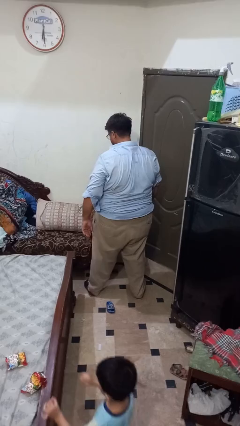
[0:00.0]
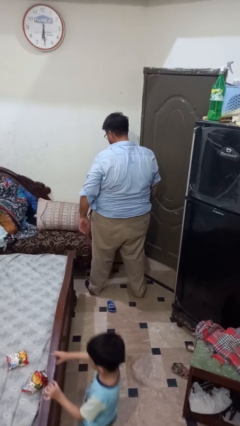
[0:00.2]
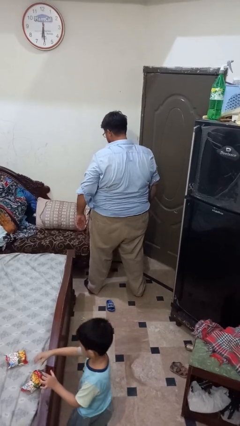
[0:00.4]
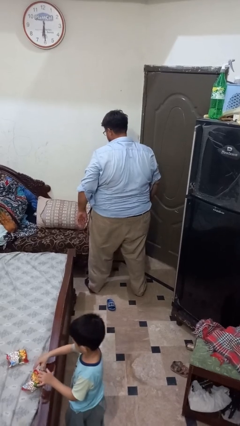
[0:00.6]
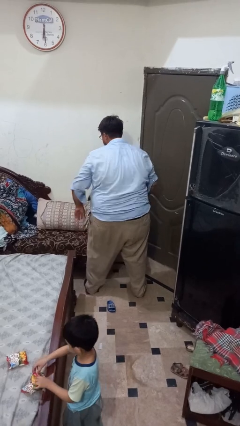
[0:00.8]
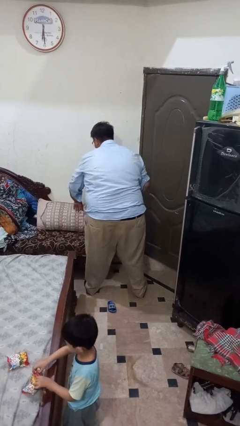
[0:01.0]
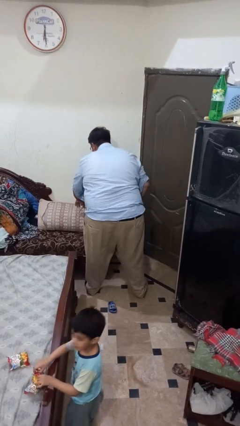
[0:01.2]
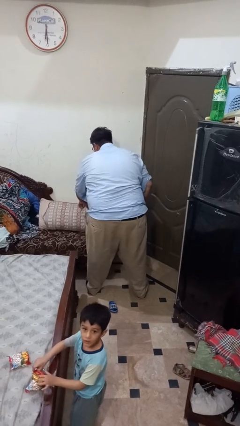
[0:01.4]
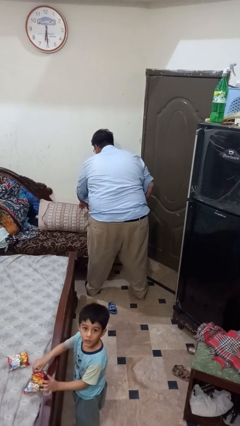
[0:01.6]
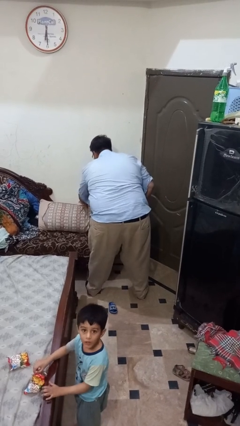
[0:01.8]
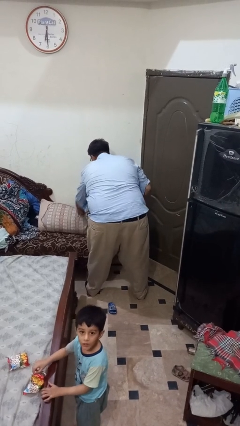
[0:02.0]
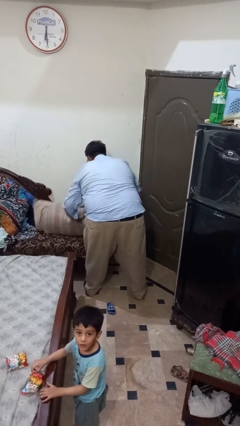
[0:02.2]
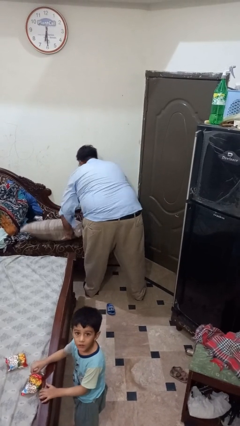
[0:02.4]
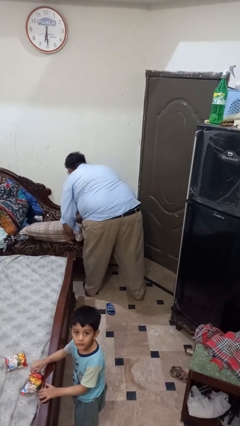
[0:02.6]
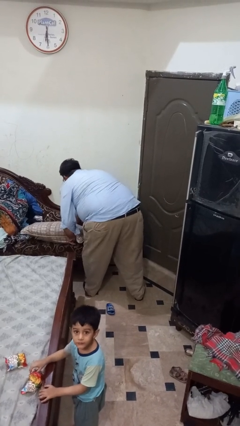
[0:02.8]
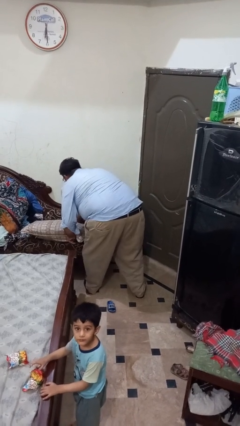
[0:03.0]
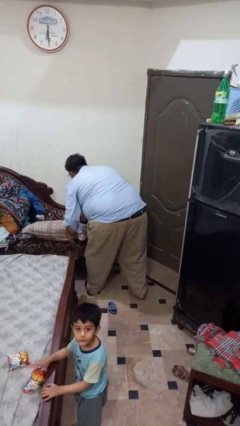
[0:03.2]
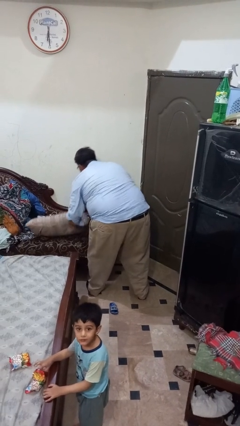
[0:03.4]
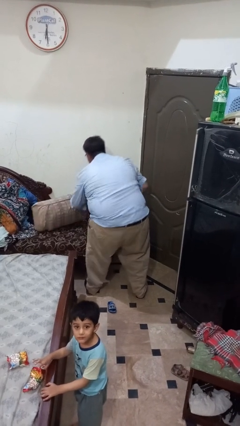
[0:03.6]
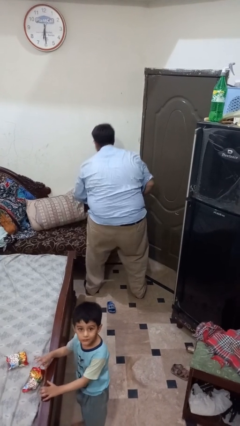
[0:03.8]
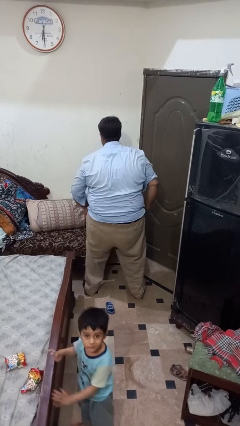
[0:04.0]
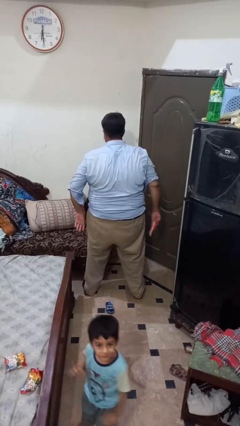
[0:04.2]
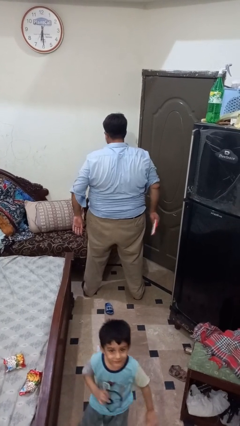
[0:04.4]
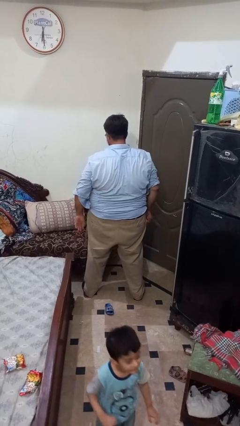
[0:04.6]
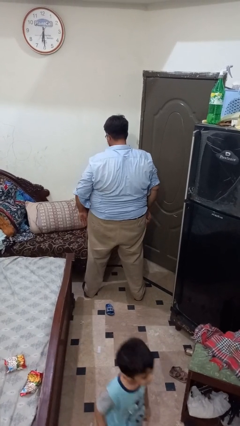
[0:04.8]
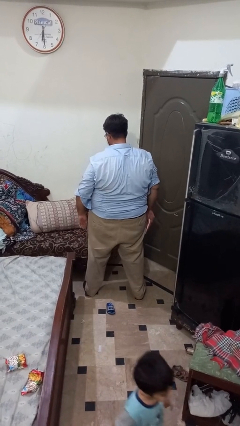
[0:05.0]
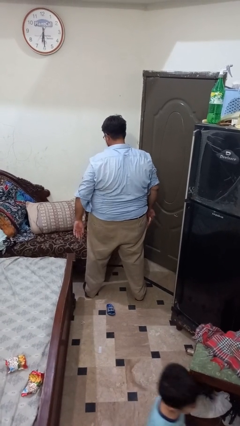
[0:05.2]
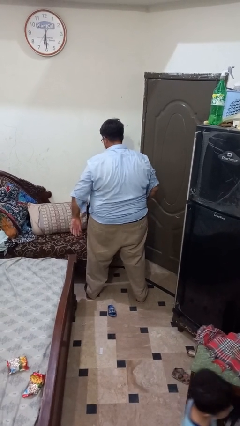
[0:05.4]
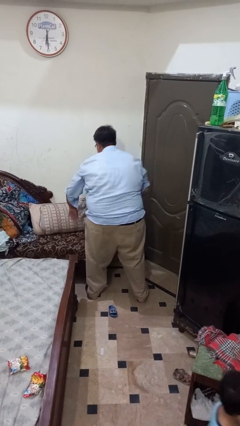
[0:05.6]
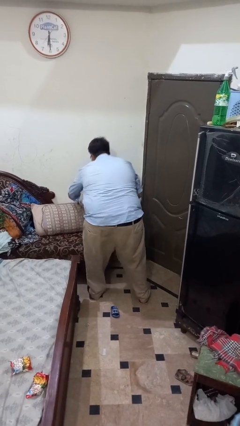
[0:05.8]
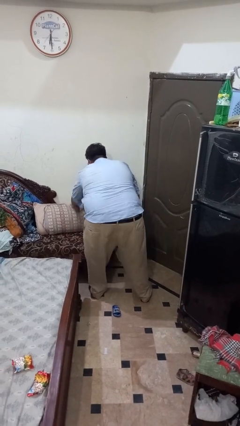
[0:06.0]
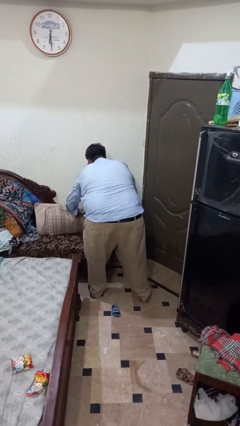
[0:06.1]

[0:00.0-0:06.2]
person searches in couch

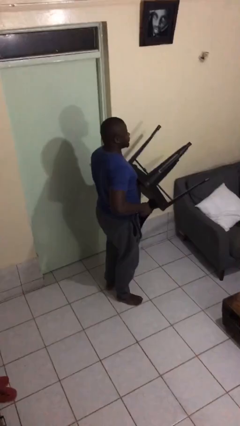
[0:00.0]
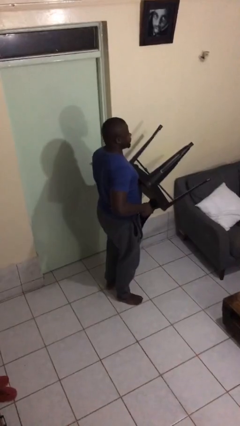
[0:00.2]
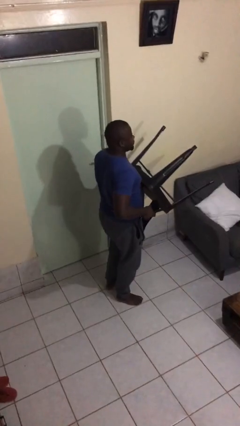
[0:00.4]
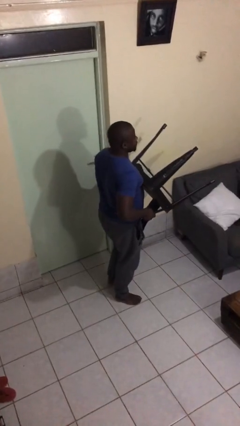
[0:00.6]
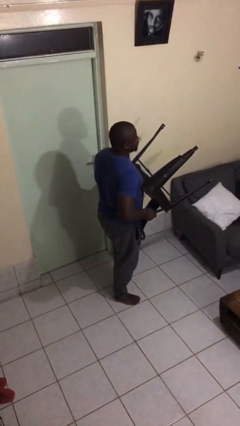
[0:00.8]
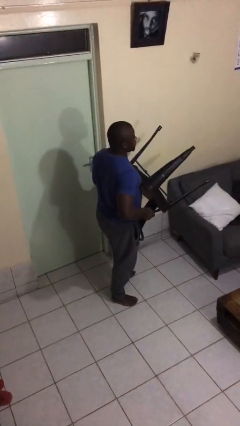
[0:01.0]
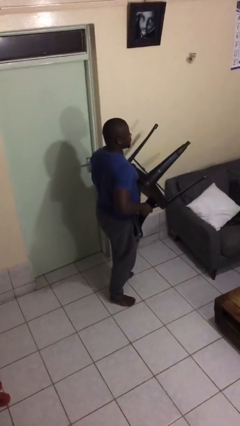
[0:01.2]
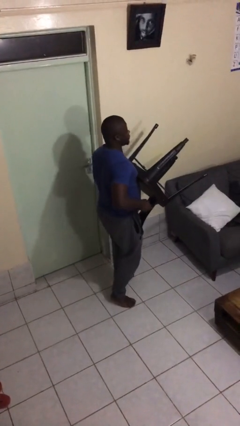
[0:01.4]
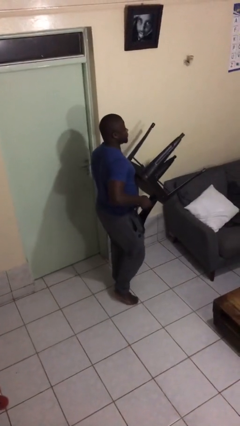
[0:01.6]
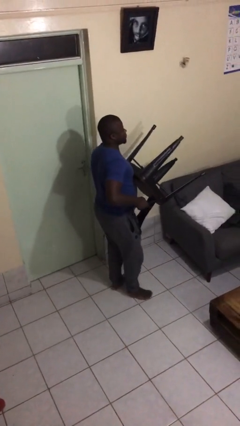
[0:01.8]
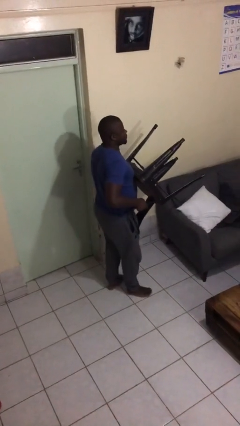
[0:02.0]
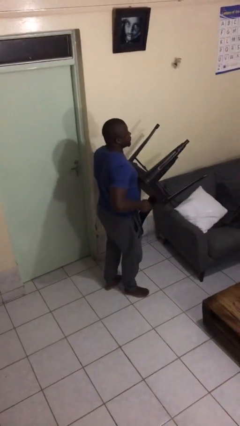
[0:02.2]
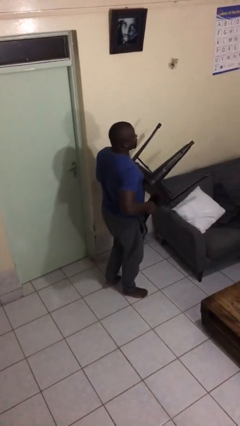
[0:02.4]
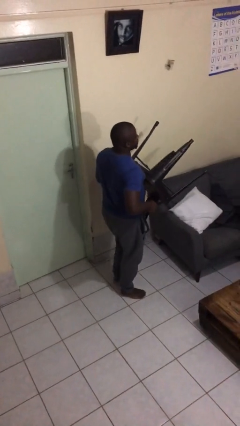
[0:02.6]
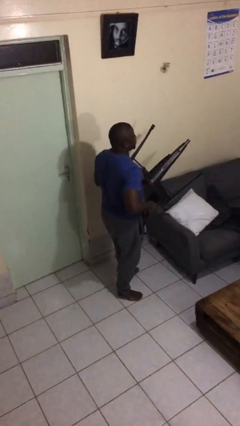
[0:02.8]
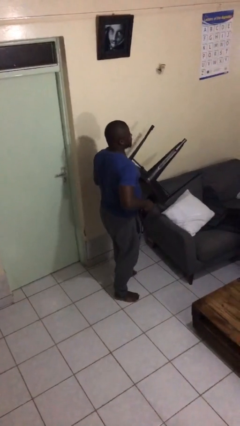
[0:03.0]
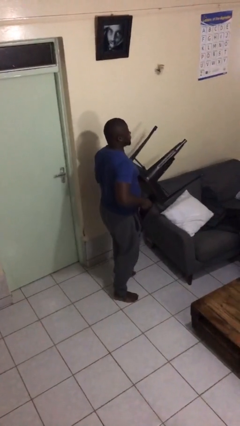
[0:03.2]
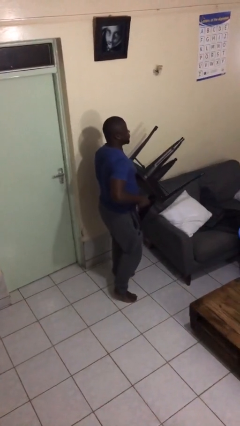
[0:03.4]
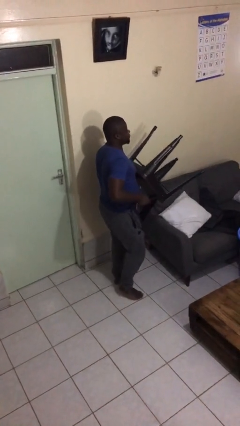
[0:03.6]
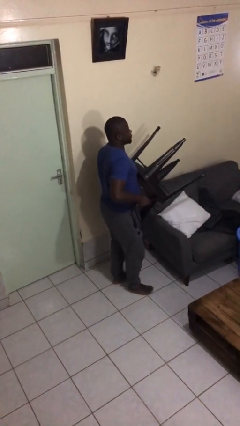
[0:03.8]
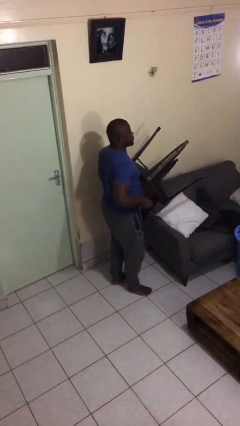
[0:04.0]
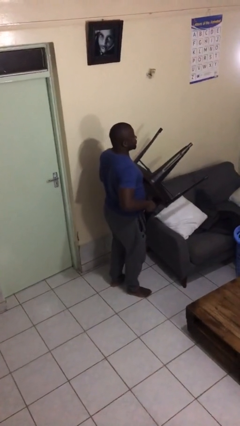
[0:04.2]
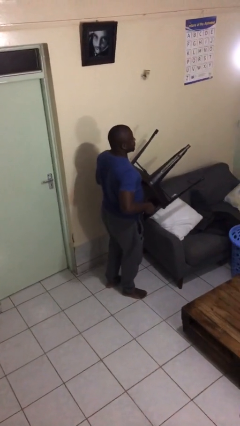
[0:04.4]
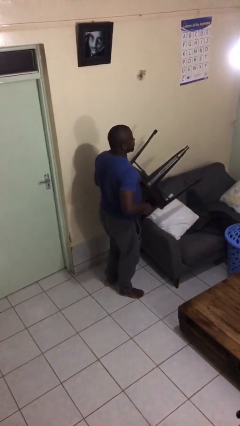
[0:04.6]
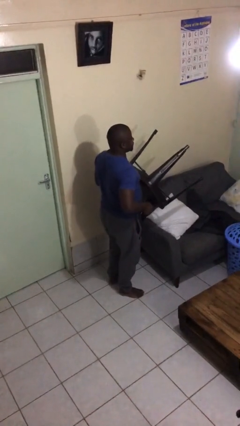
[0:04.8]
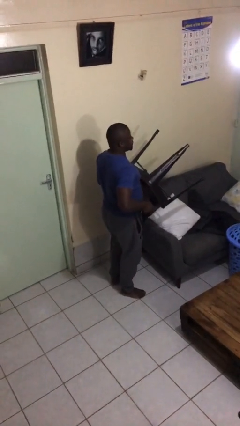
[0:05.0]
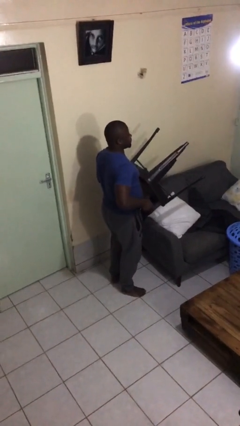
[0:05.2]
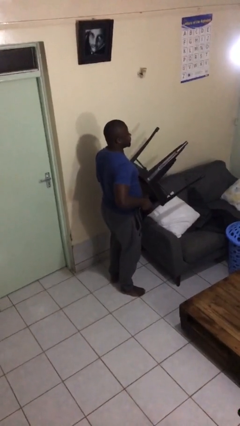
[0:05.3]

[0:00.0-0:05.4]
person carries furniture

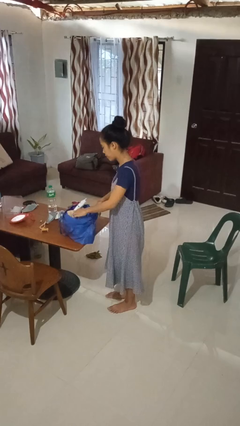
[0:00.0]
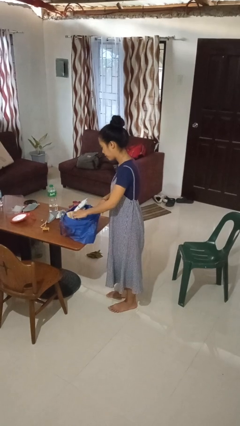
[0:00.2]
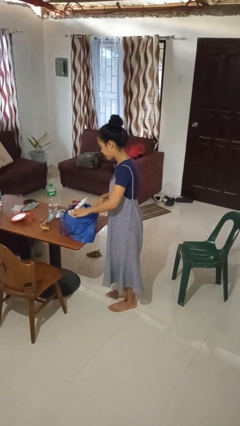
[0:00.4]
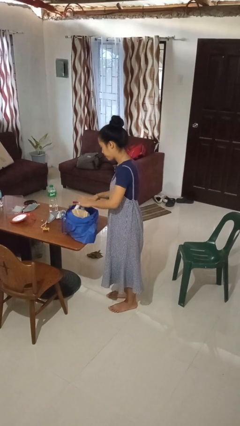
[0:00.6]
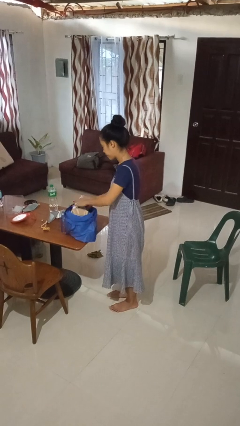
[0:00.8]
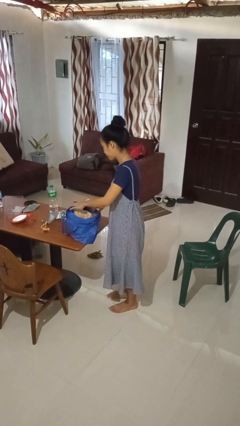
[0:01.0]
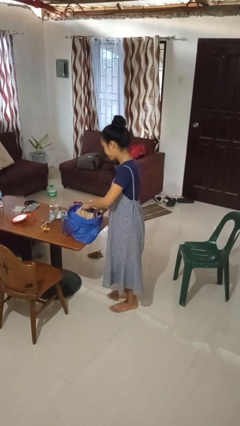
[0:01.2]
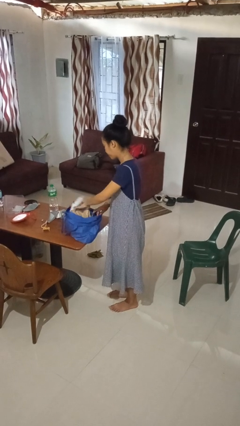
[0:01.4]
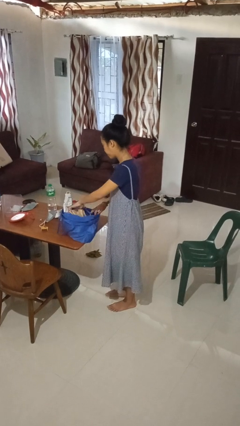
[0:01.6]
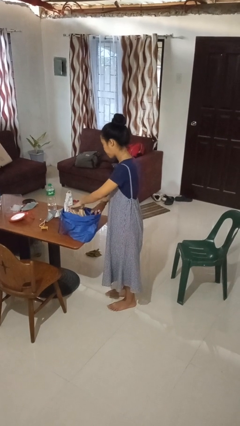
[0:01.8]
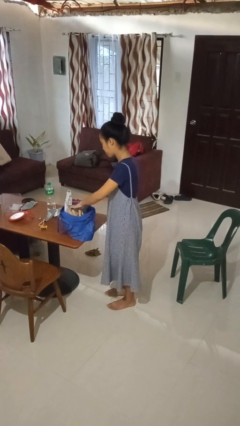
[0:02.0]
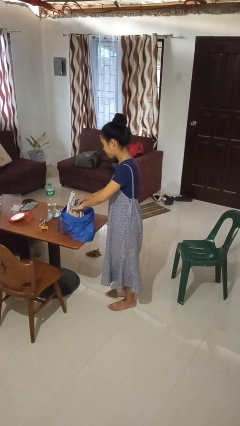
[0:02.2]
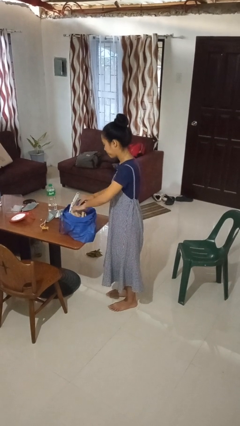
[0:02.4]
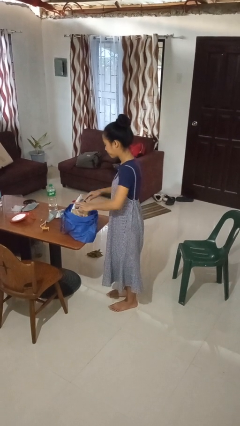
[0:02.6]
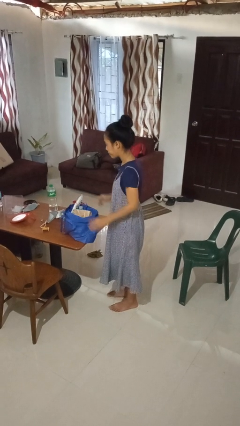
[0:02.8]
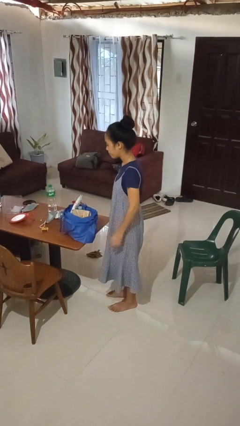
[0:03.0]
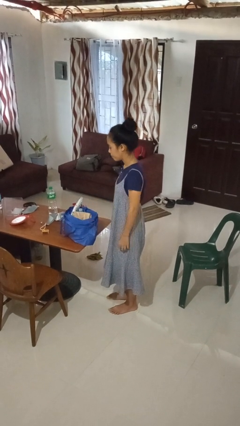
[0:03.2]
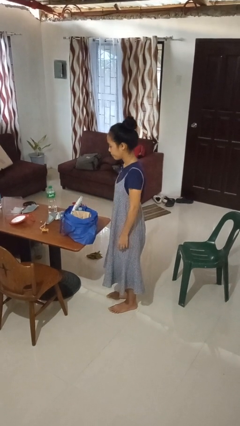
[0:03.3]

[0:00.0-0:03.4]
person searches in bag

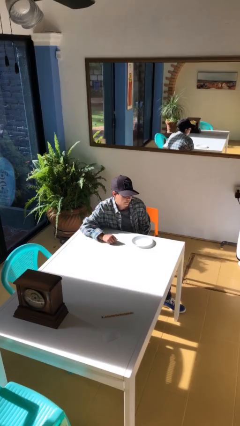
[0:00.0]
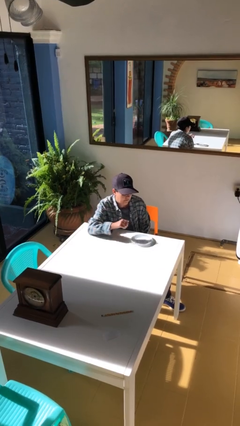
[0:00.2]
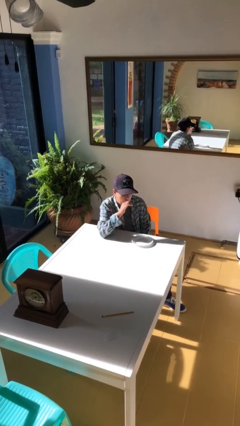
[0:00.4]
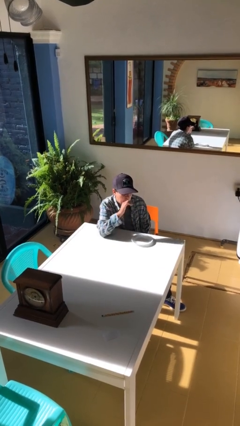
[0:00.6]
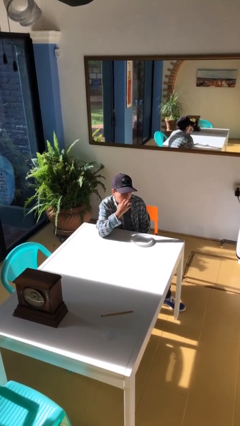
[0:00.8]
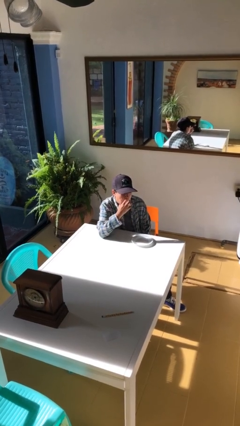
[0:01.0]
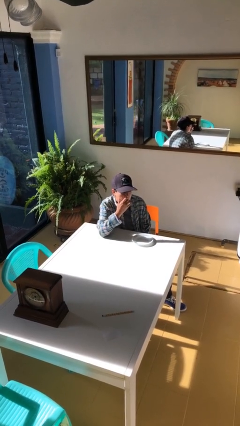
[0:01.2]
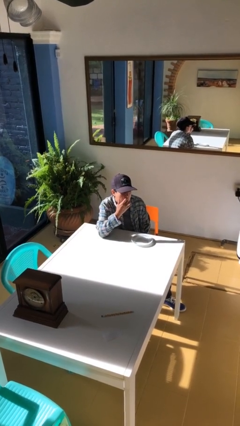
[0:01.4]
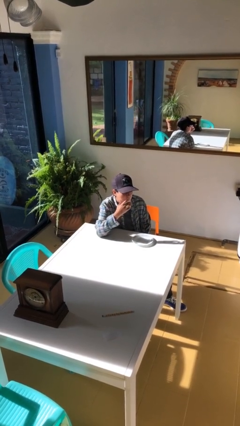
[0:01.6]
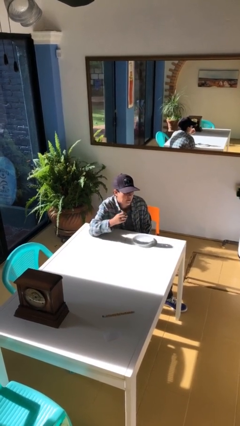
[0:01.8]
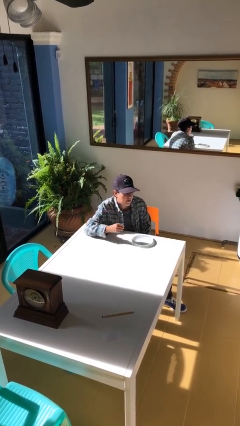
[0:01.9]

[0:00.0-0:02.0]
person licks fingers

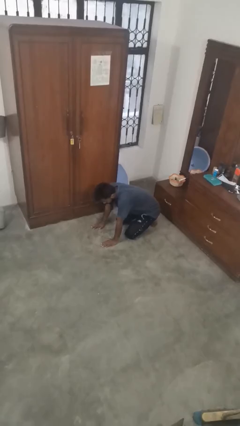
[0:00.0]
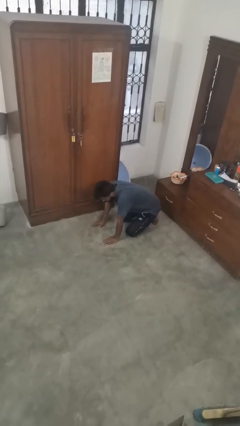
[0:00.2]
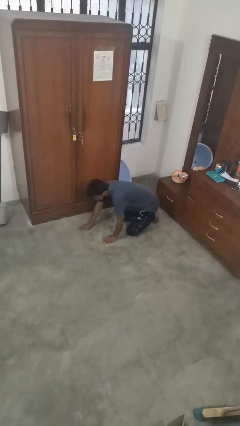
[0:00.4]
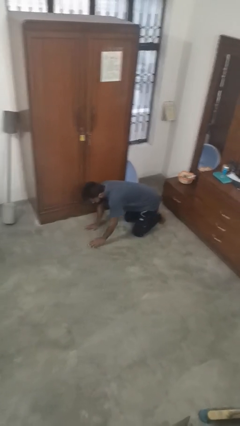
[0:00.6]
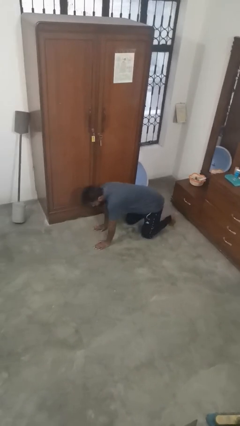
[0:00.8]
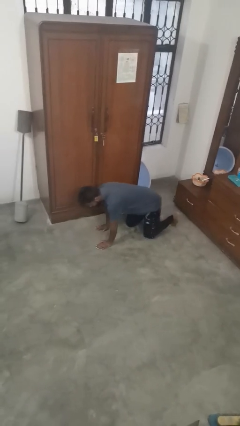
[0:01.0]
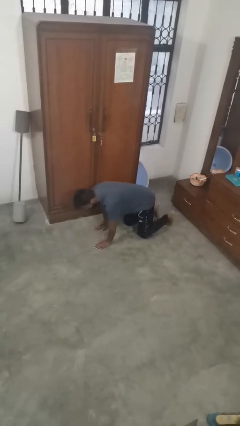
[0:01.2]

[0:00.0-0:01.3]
person crawls
